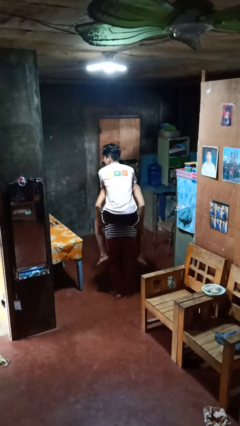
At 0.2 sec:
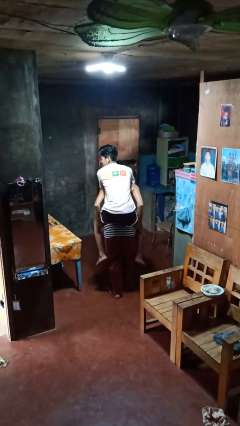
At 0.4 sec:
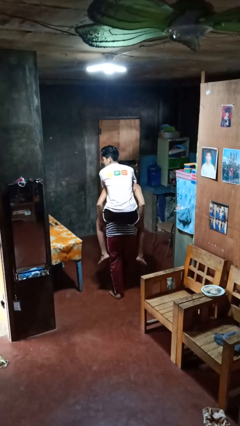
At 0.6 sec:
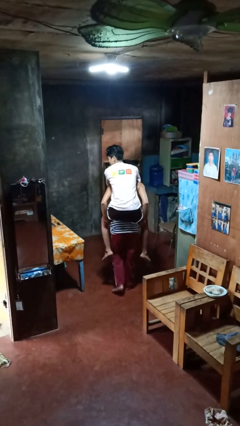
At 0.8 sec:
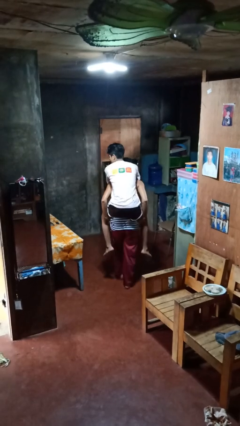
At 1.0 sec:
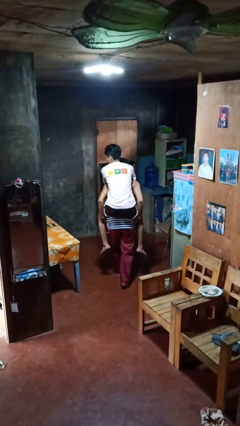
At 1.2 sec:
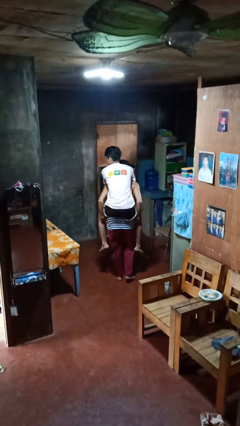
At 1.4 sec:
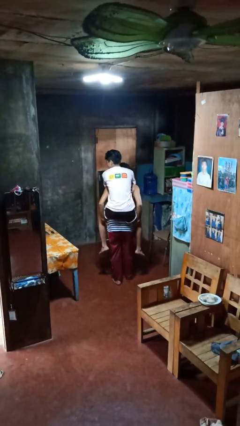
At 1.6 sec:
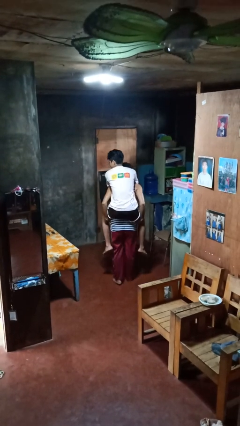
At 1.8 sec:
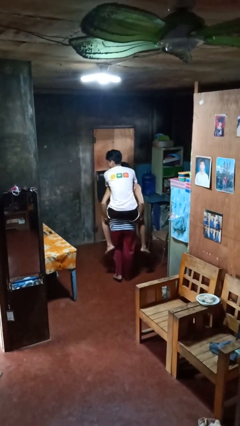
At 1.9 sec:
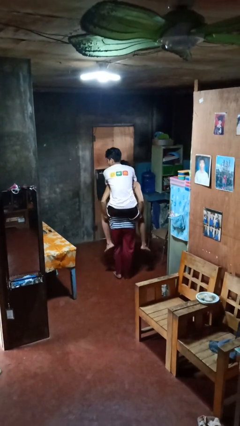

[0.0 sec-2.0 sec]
person carries person on back

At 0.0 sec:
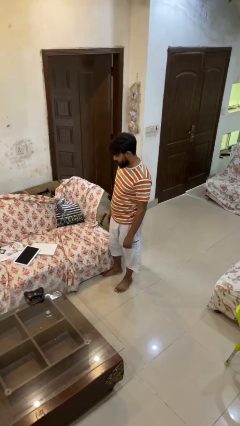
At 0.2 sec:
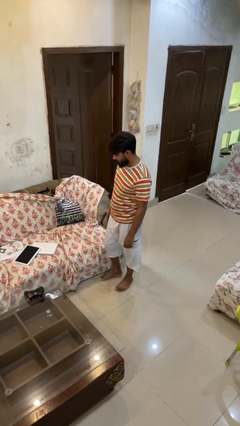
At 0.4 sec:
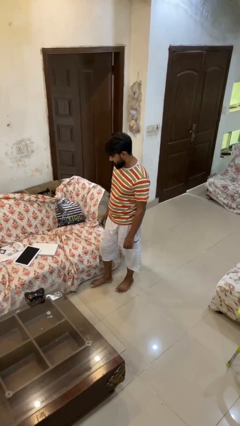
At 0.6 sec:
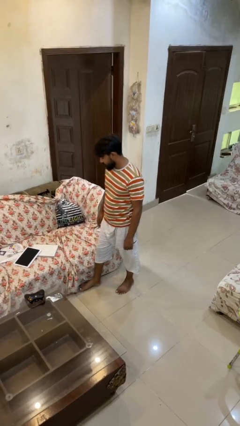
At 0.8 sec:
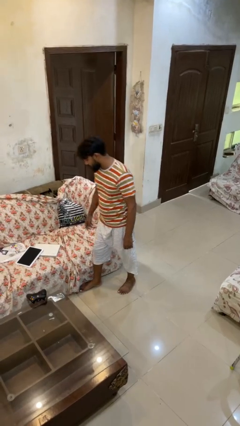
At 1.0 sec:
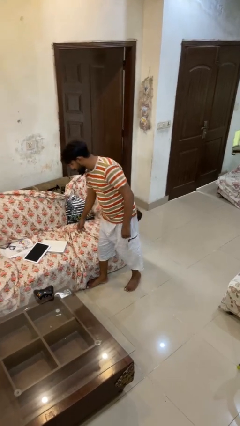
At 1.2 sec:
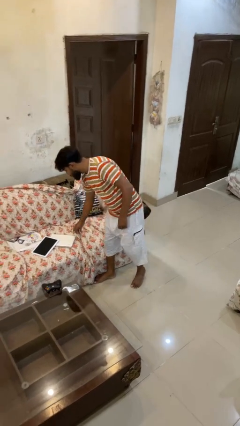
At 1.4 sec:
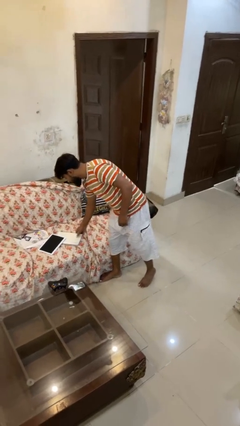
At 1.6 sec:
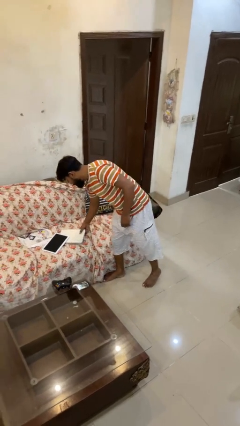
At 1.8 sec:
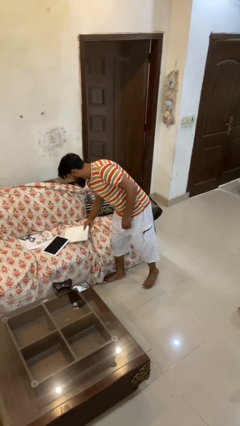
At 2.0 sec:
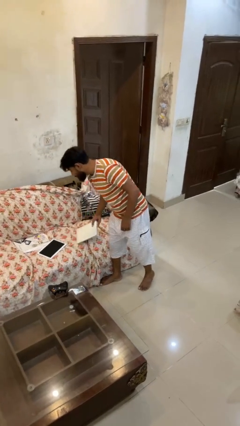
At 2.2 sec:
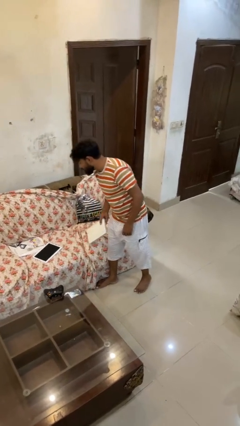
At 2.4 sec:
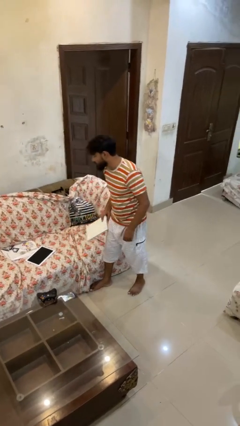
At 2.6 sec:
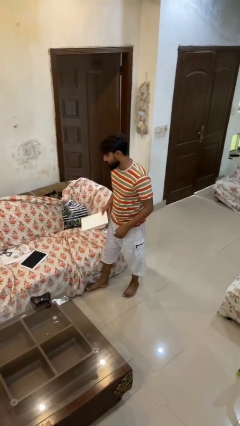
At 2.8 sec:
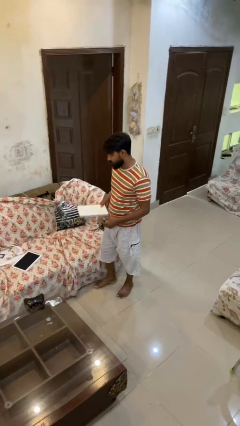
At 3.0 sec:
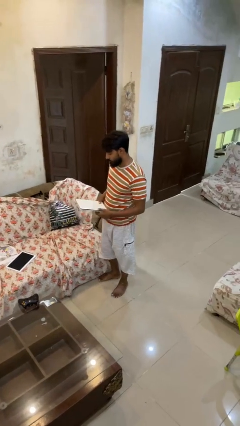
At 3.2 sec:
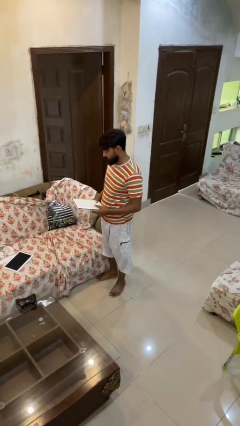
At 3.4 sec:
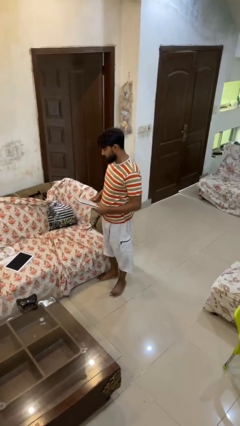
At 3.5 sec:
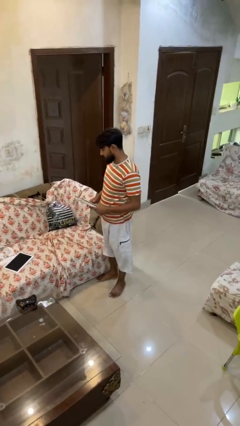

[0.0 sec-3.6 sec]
person picks up object from couch

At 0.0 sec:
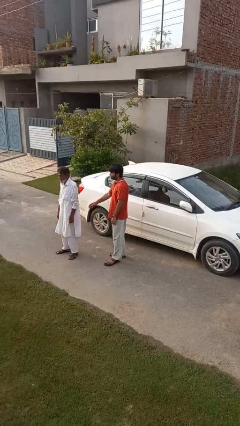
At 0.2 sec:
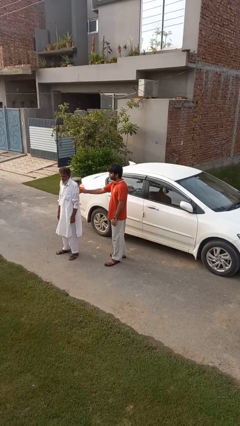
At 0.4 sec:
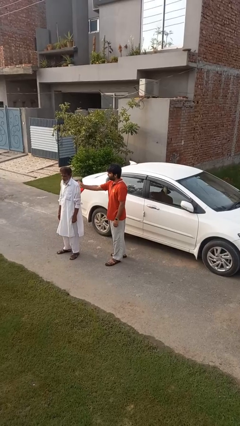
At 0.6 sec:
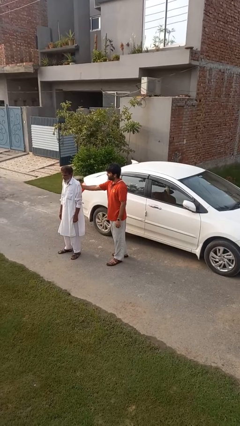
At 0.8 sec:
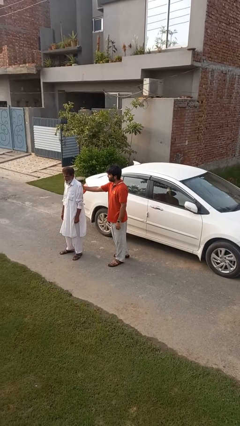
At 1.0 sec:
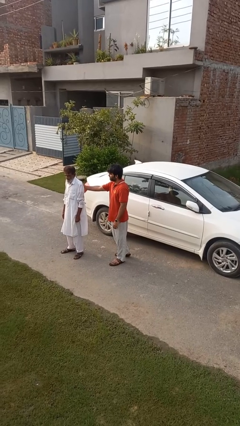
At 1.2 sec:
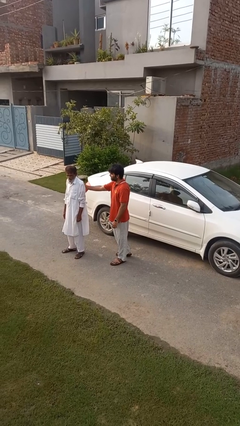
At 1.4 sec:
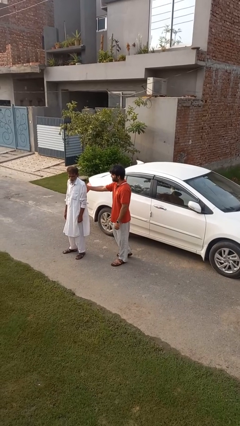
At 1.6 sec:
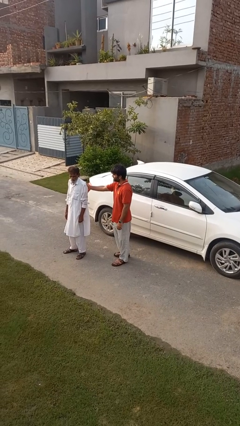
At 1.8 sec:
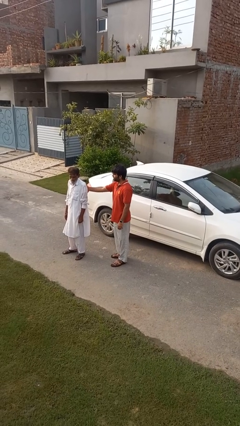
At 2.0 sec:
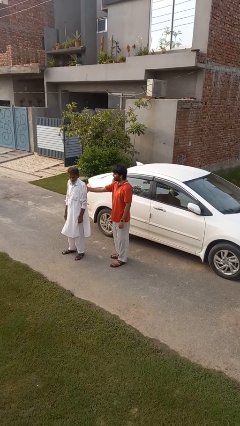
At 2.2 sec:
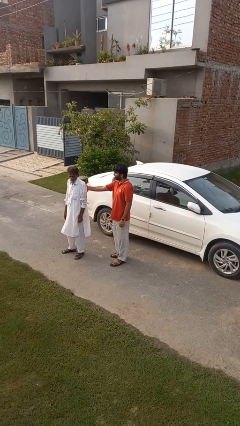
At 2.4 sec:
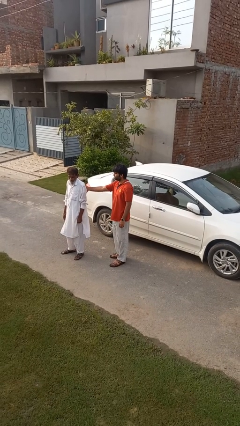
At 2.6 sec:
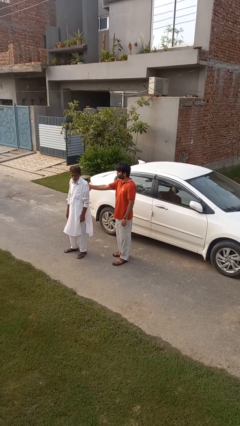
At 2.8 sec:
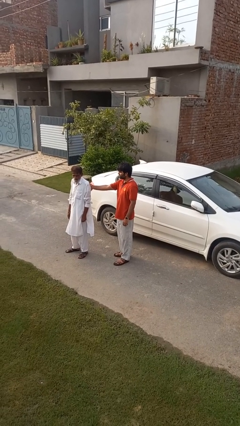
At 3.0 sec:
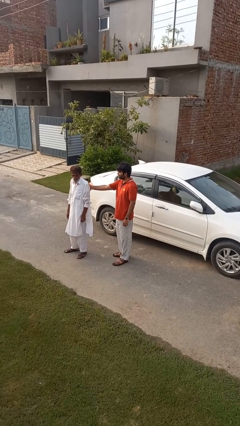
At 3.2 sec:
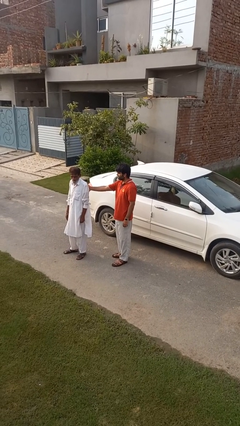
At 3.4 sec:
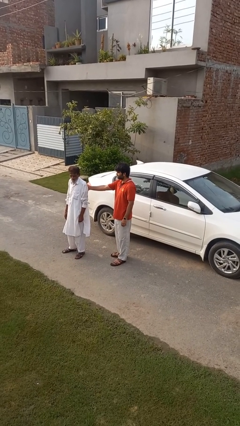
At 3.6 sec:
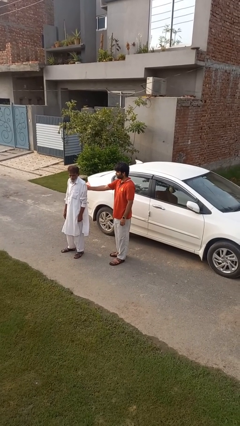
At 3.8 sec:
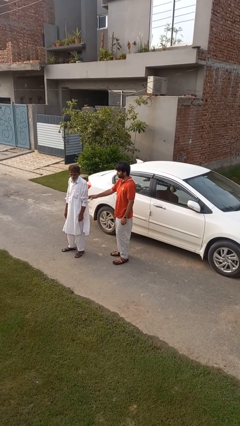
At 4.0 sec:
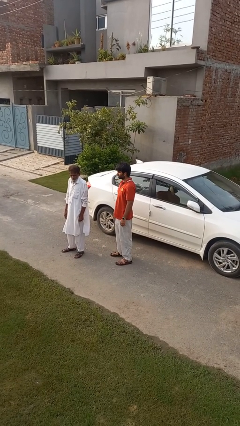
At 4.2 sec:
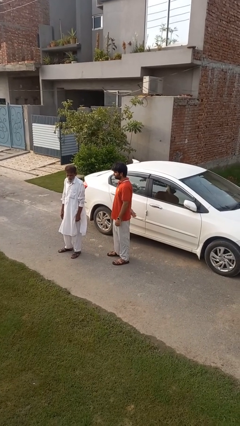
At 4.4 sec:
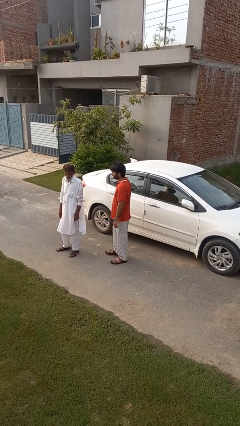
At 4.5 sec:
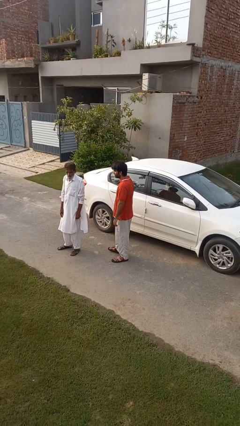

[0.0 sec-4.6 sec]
person touches back of person

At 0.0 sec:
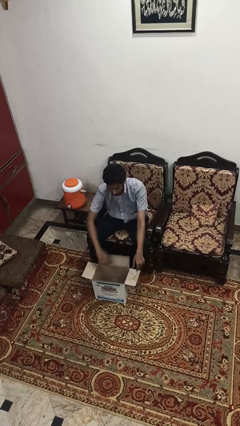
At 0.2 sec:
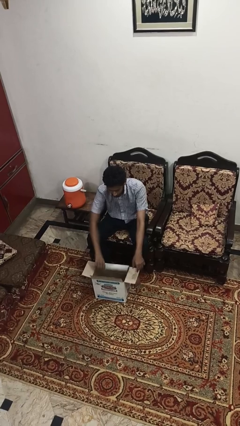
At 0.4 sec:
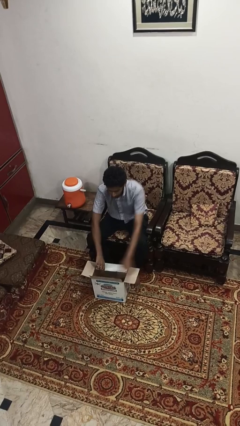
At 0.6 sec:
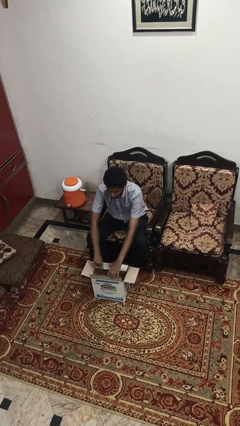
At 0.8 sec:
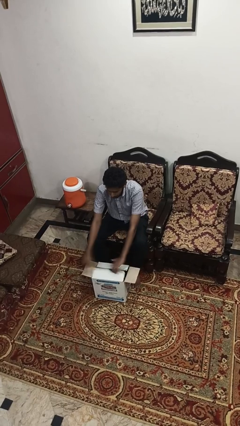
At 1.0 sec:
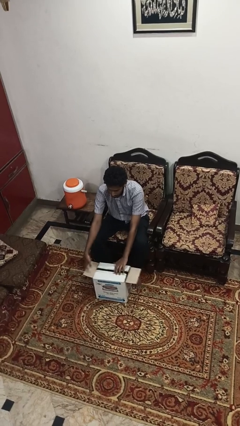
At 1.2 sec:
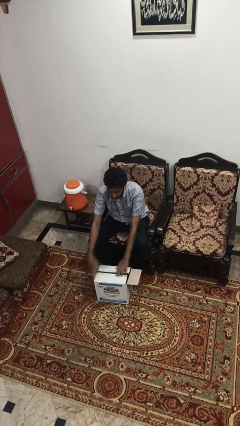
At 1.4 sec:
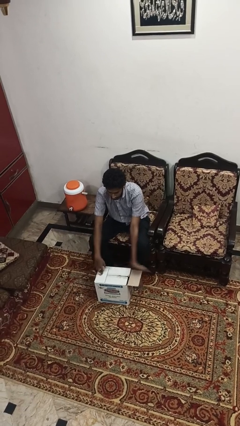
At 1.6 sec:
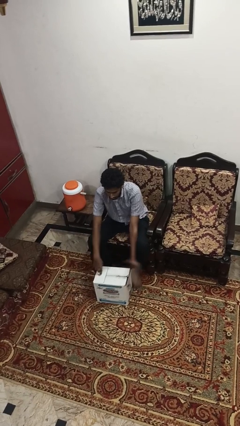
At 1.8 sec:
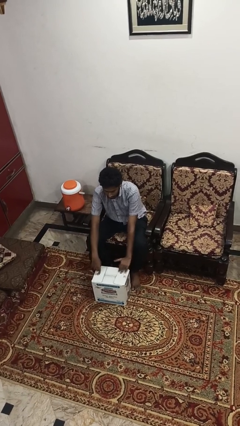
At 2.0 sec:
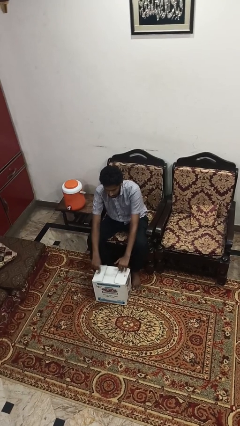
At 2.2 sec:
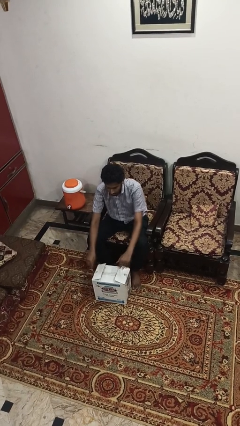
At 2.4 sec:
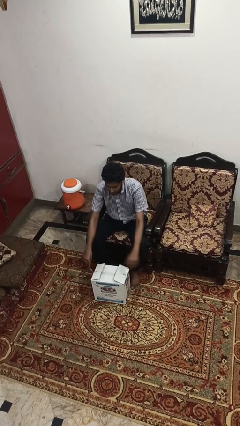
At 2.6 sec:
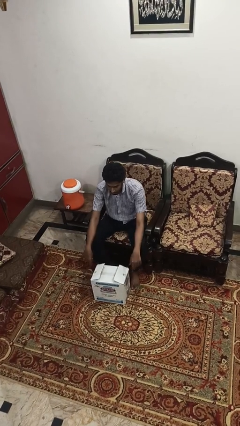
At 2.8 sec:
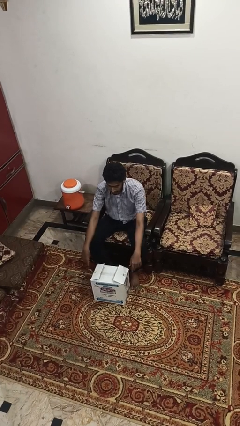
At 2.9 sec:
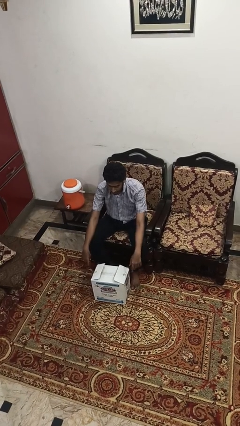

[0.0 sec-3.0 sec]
person closes box

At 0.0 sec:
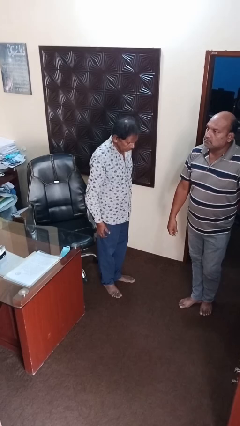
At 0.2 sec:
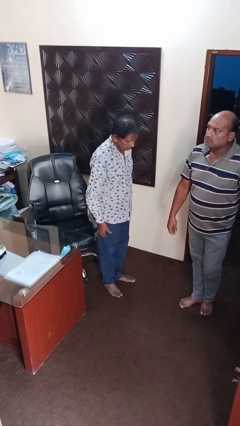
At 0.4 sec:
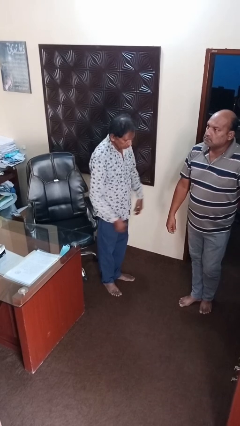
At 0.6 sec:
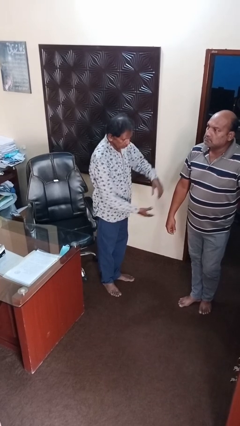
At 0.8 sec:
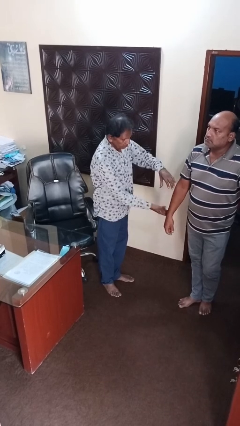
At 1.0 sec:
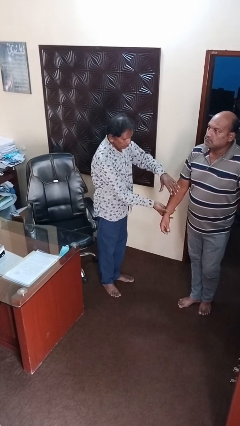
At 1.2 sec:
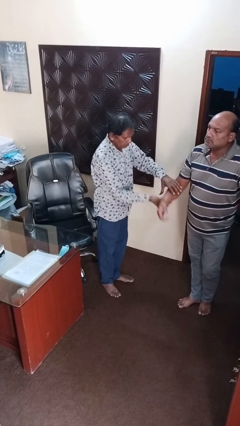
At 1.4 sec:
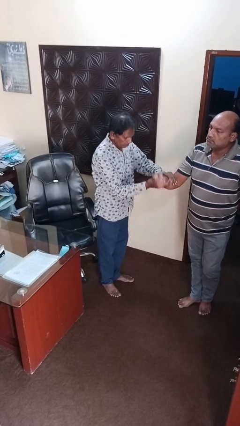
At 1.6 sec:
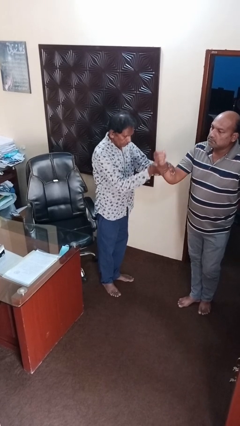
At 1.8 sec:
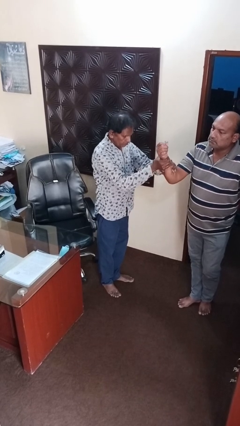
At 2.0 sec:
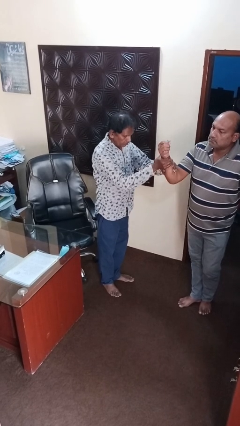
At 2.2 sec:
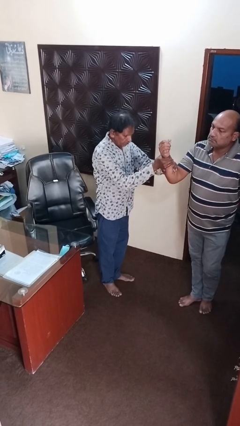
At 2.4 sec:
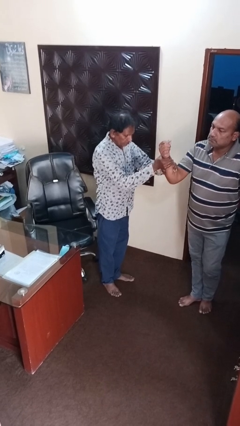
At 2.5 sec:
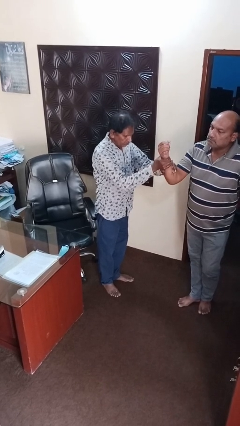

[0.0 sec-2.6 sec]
person grabs person by forearm

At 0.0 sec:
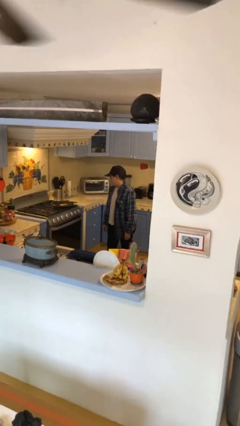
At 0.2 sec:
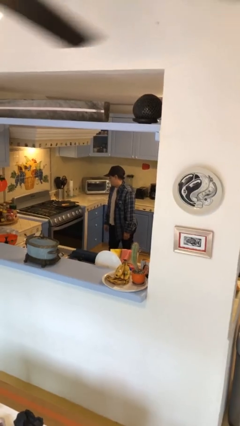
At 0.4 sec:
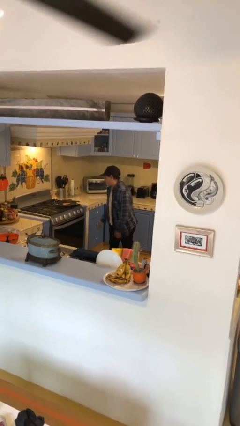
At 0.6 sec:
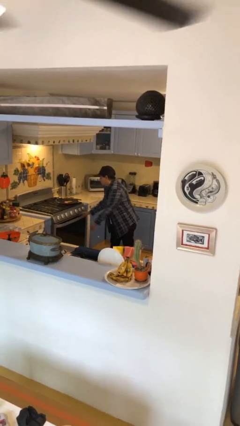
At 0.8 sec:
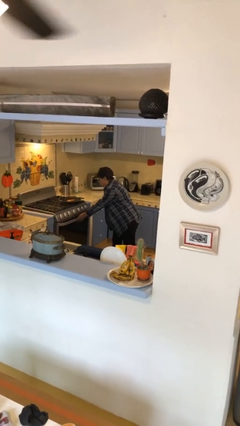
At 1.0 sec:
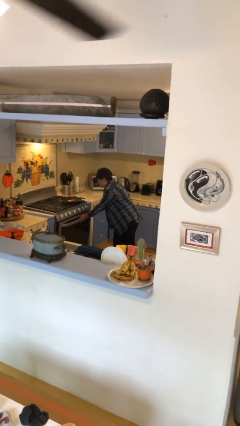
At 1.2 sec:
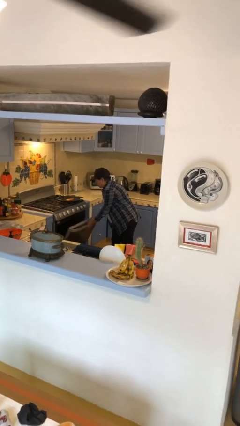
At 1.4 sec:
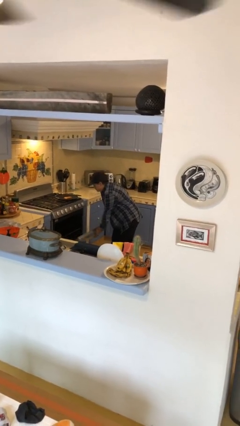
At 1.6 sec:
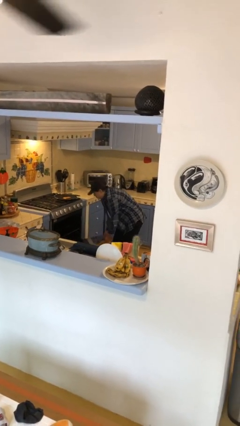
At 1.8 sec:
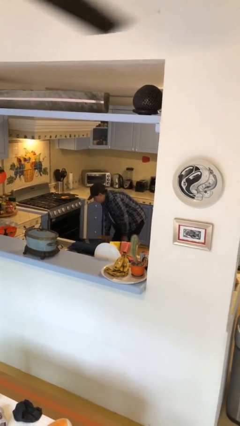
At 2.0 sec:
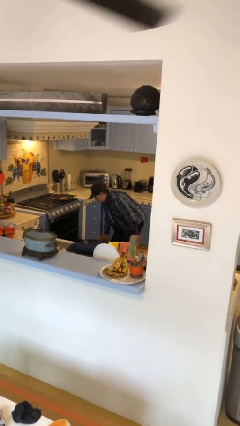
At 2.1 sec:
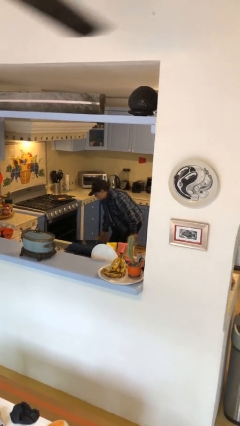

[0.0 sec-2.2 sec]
person puts object into toaster
